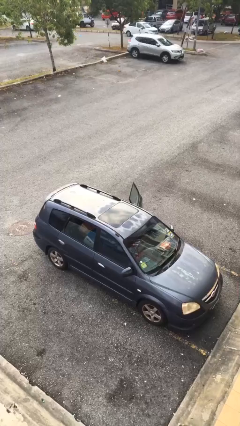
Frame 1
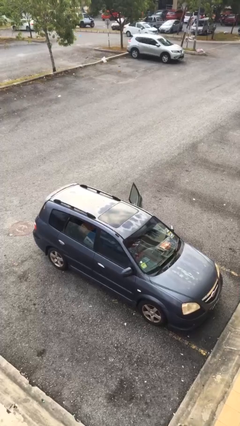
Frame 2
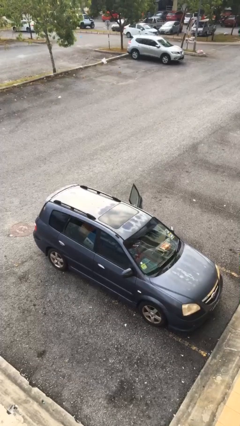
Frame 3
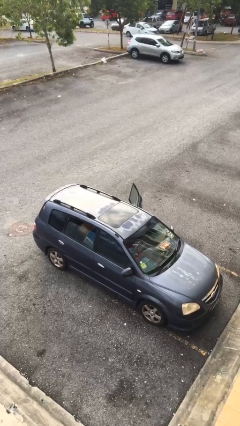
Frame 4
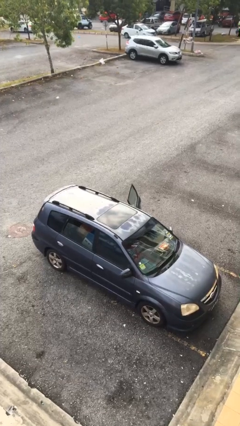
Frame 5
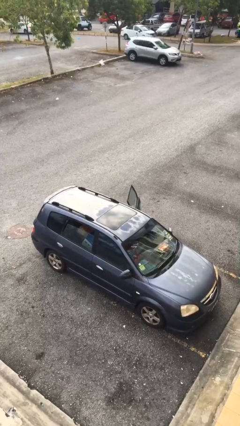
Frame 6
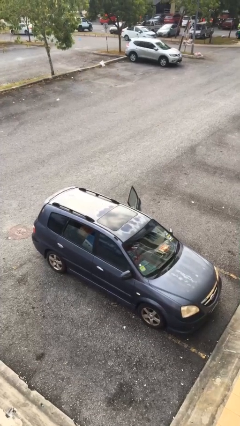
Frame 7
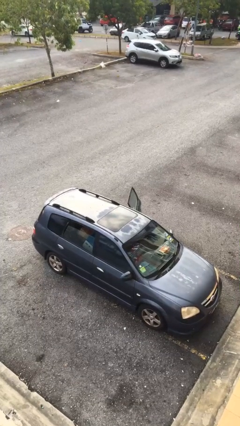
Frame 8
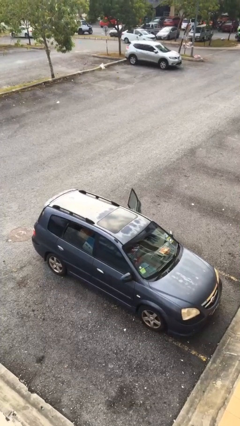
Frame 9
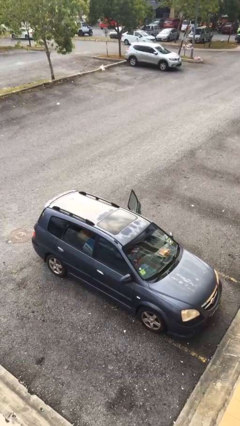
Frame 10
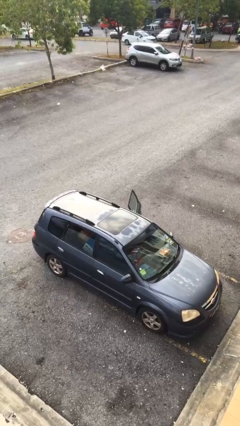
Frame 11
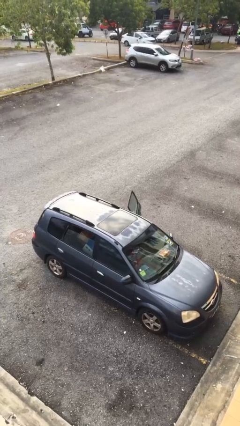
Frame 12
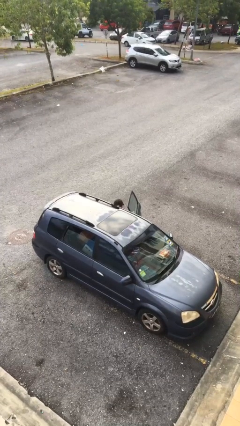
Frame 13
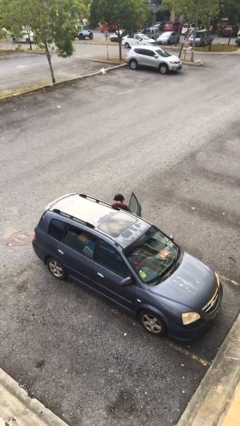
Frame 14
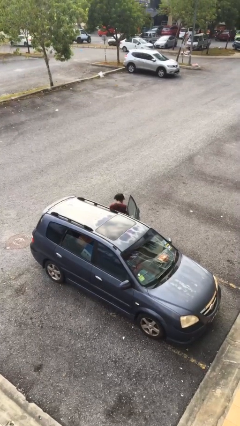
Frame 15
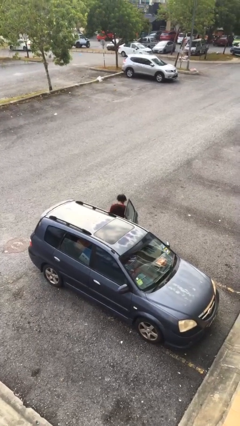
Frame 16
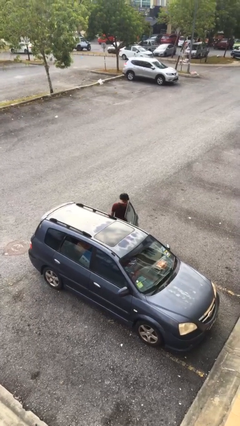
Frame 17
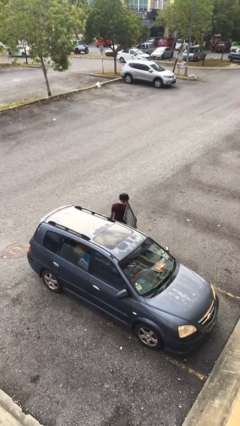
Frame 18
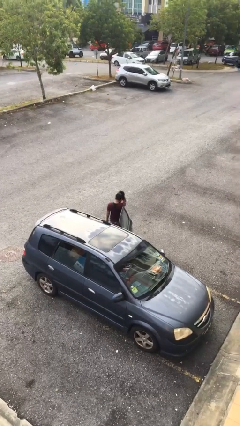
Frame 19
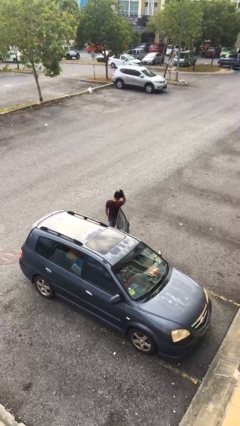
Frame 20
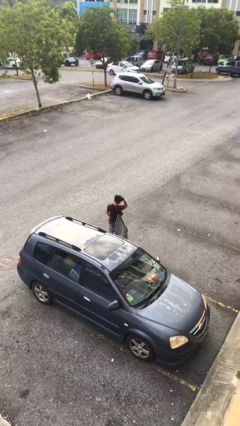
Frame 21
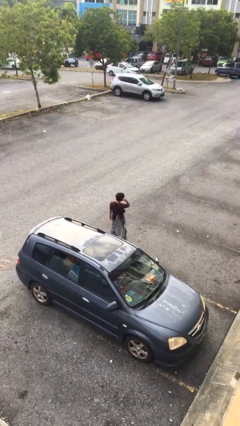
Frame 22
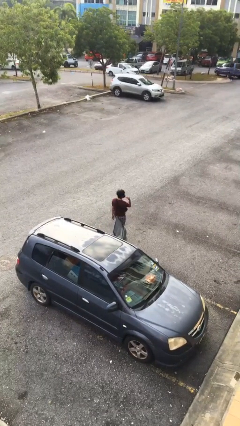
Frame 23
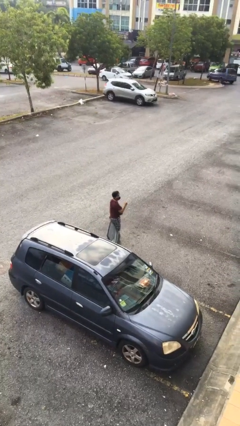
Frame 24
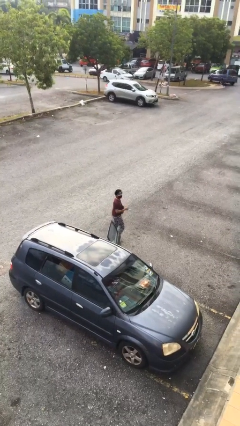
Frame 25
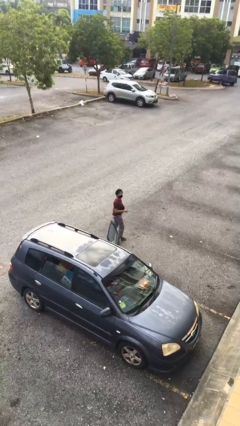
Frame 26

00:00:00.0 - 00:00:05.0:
person exits car

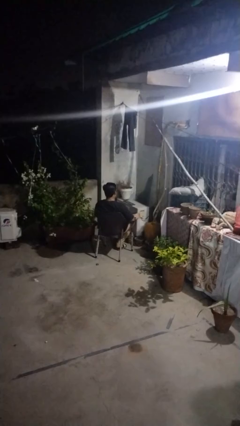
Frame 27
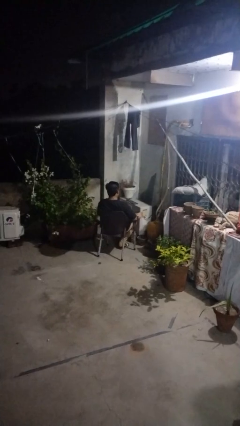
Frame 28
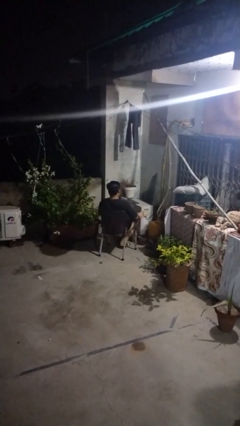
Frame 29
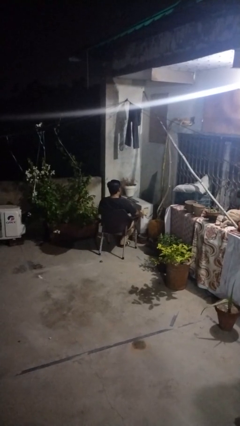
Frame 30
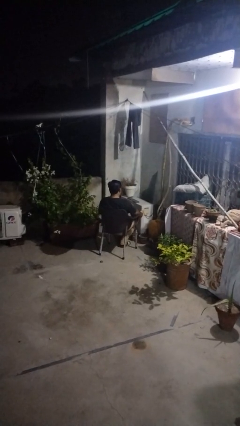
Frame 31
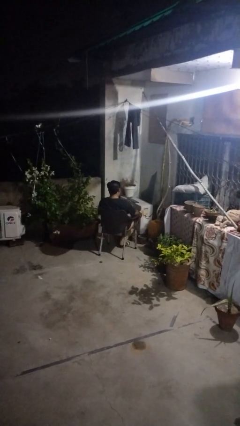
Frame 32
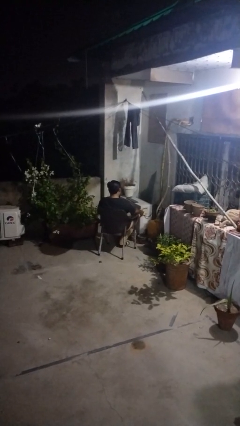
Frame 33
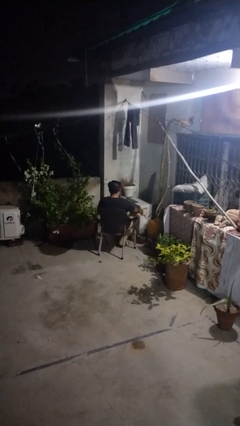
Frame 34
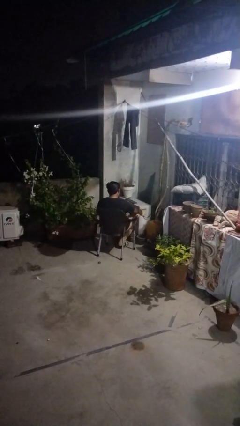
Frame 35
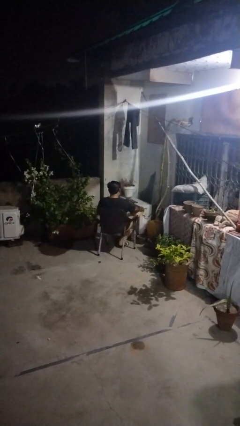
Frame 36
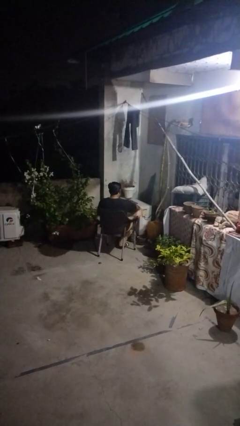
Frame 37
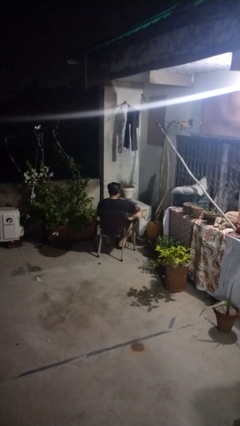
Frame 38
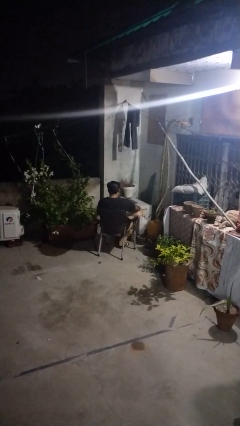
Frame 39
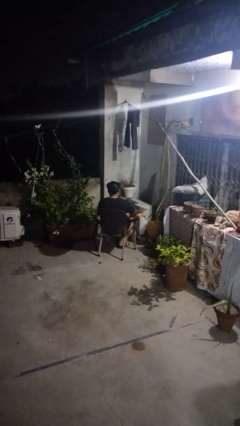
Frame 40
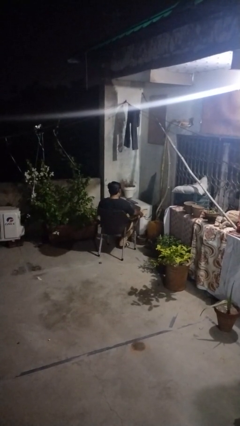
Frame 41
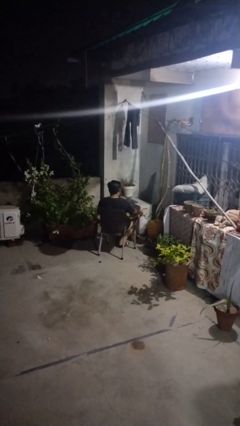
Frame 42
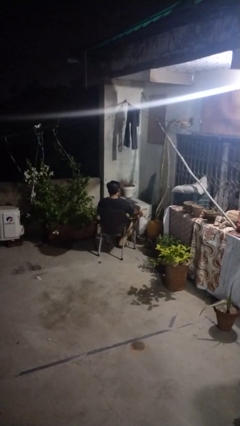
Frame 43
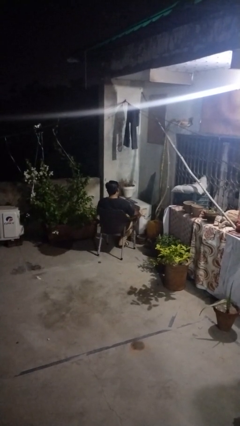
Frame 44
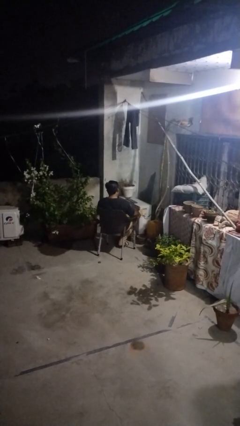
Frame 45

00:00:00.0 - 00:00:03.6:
person rubs foot

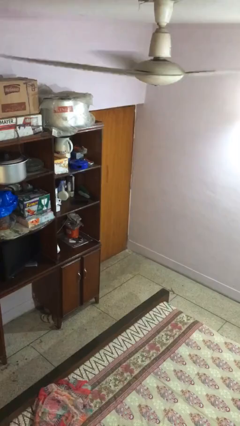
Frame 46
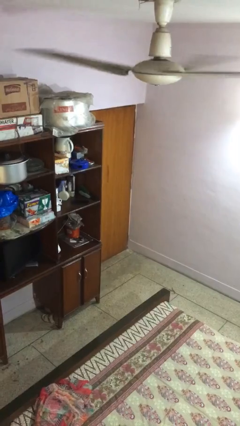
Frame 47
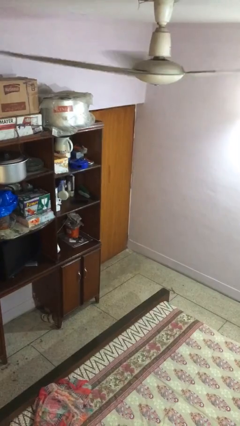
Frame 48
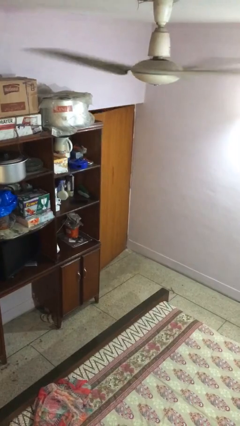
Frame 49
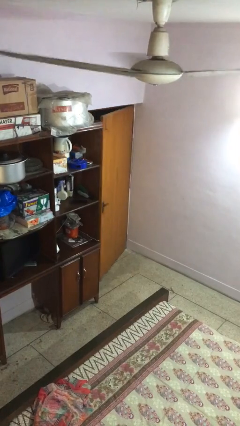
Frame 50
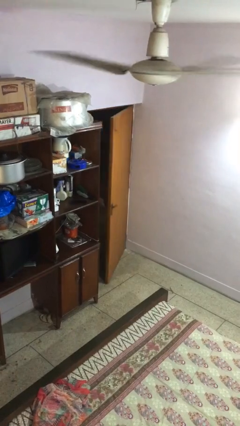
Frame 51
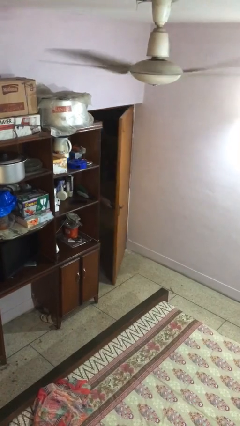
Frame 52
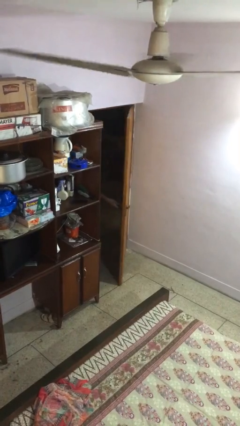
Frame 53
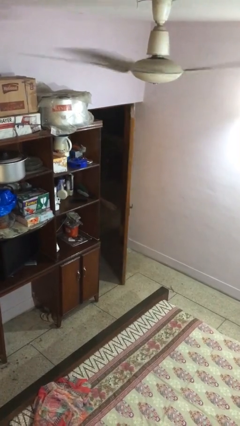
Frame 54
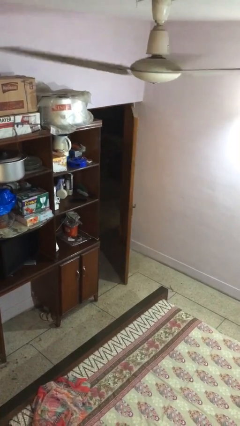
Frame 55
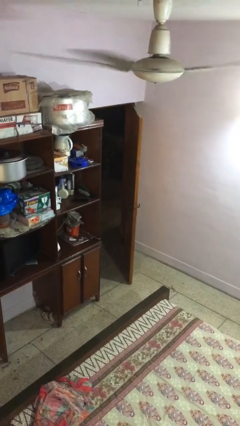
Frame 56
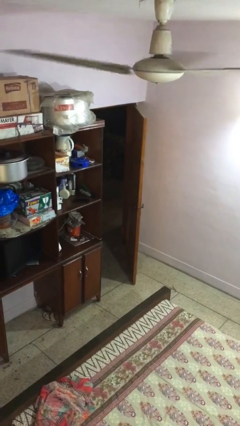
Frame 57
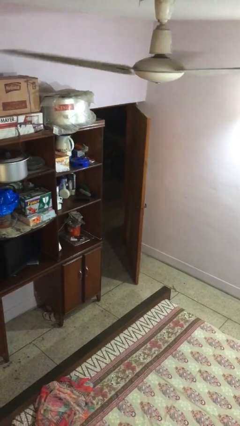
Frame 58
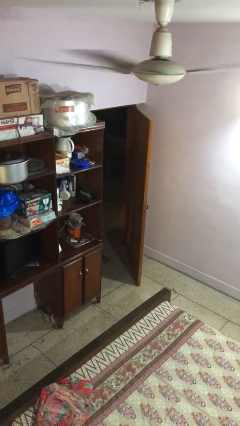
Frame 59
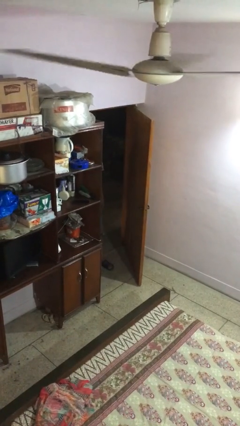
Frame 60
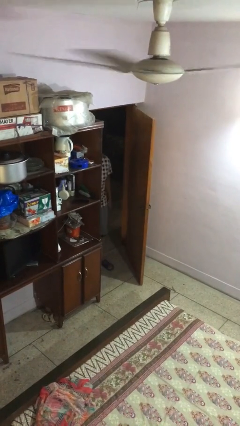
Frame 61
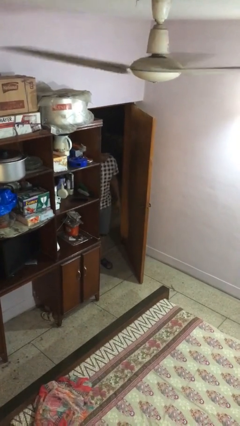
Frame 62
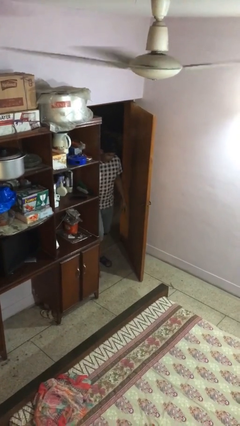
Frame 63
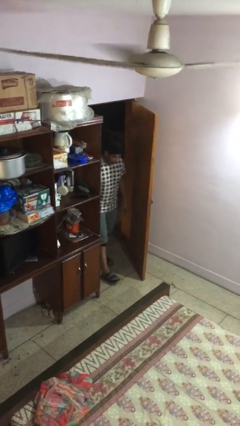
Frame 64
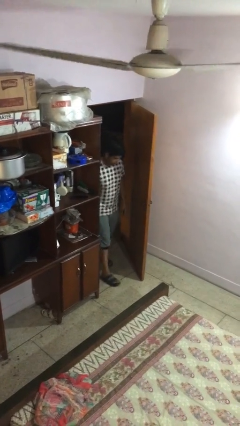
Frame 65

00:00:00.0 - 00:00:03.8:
person opens facility door

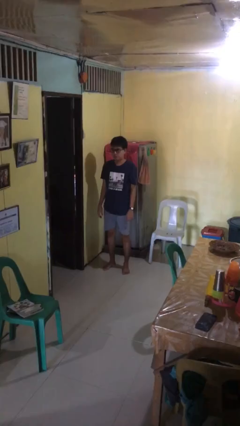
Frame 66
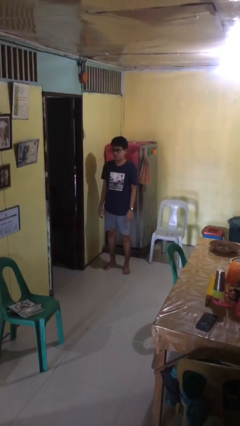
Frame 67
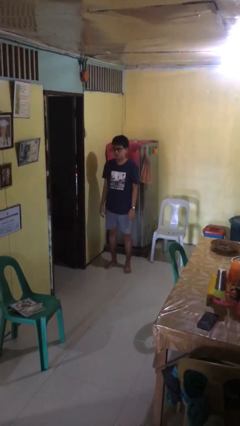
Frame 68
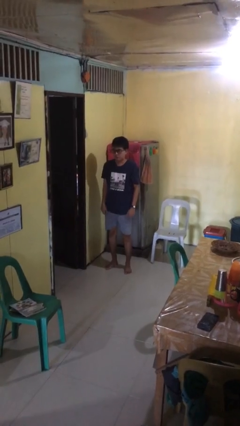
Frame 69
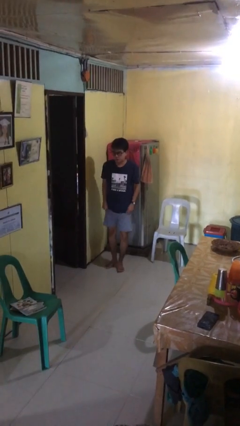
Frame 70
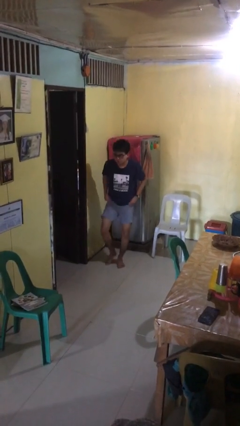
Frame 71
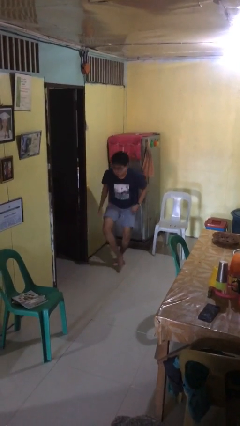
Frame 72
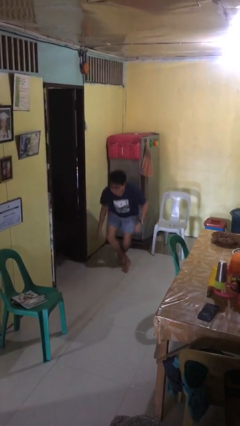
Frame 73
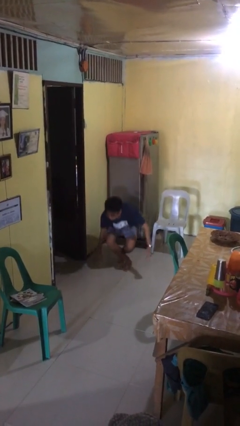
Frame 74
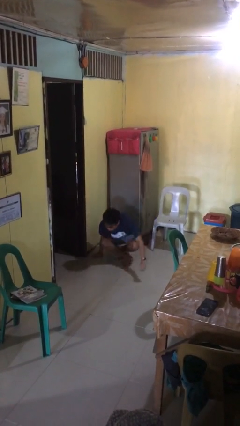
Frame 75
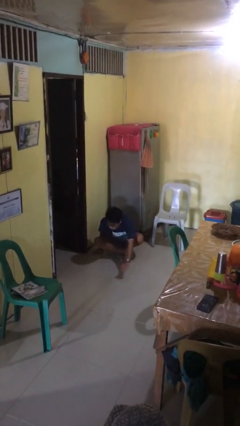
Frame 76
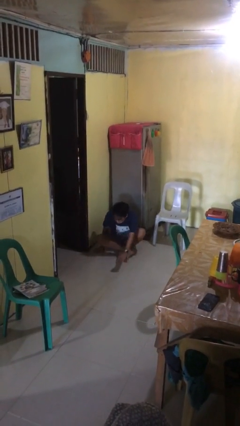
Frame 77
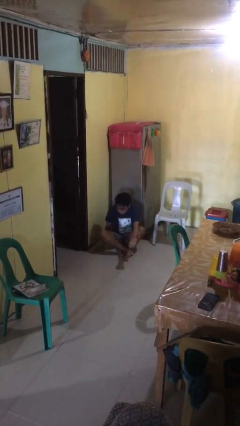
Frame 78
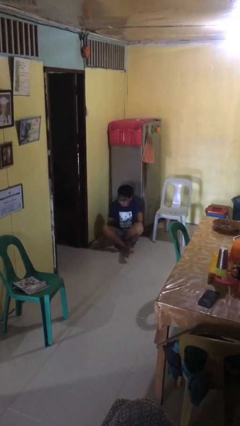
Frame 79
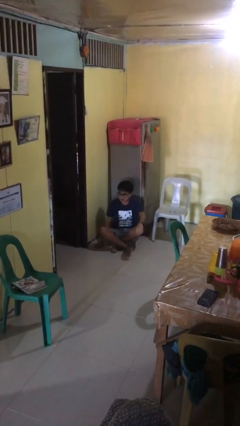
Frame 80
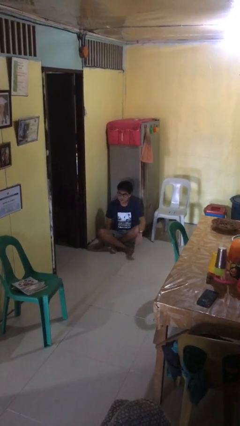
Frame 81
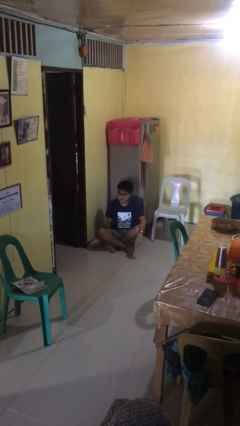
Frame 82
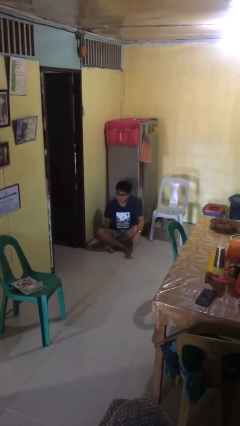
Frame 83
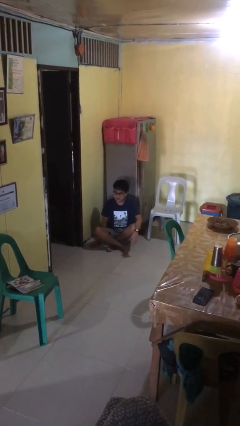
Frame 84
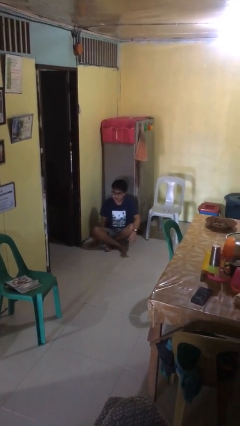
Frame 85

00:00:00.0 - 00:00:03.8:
person sits crisscross

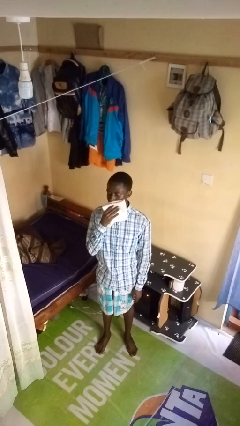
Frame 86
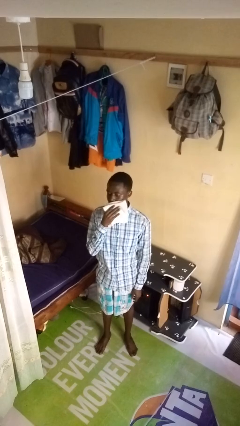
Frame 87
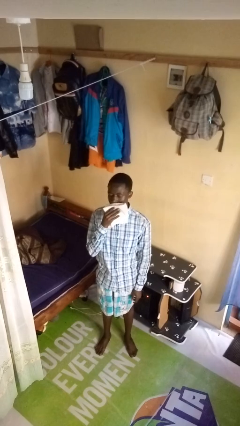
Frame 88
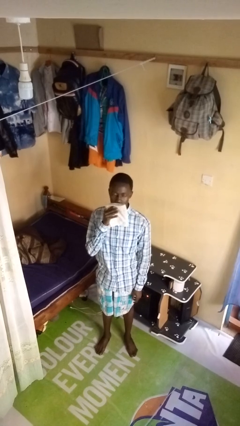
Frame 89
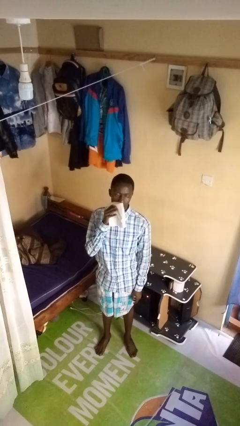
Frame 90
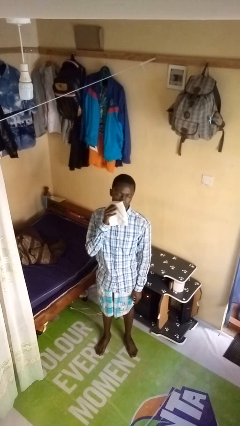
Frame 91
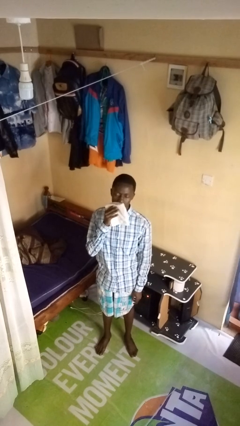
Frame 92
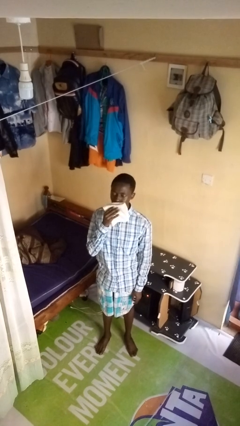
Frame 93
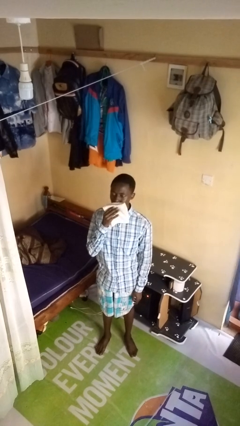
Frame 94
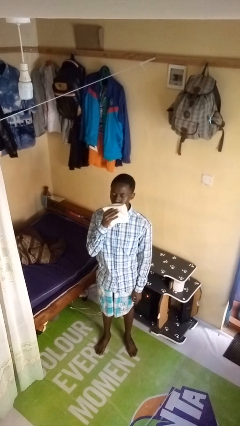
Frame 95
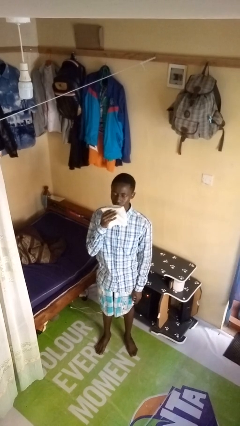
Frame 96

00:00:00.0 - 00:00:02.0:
person wipes mouth with napkin
